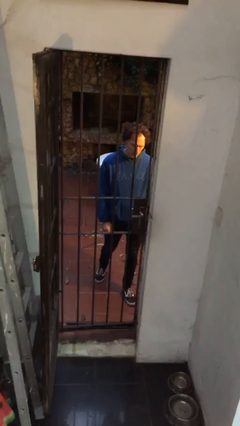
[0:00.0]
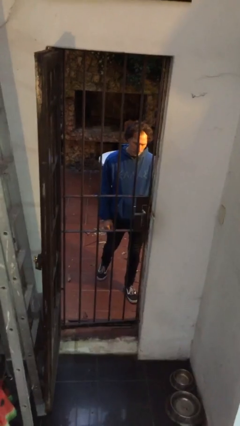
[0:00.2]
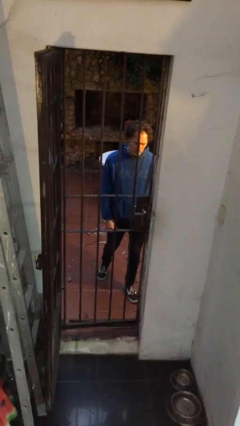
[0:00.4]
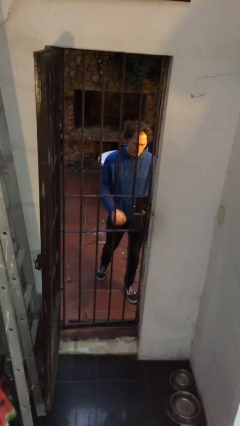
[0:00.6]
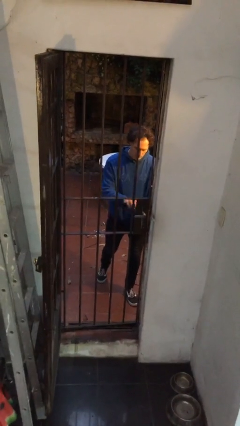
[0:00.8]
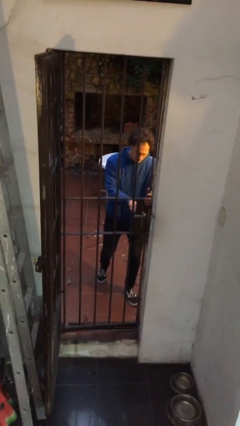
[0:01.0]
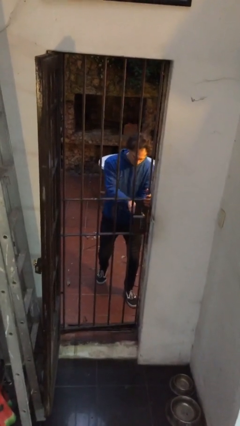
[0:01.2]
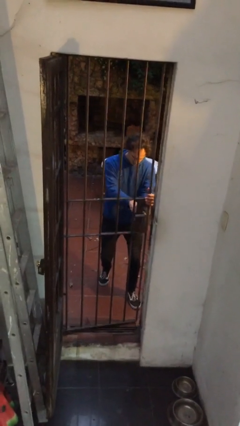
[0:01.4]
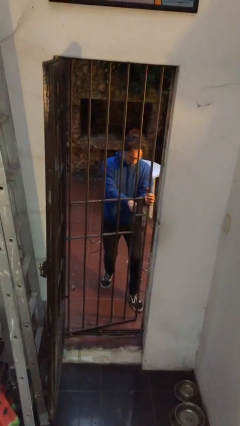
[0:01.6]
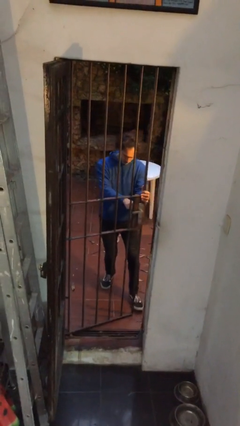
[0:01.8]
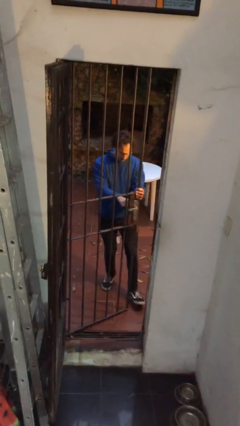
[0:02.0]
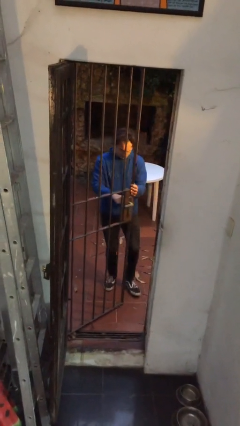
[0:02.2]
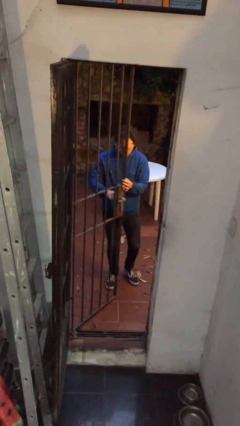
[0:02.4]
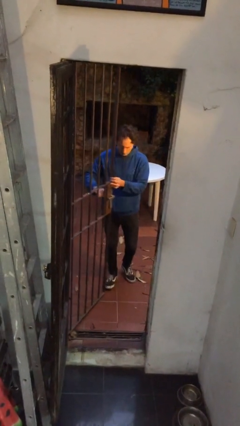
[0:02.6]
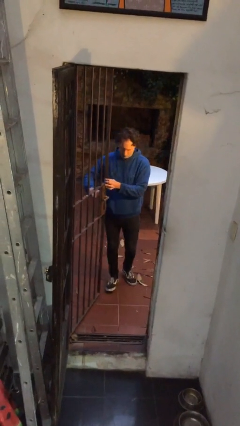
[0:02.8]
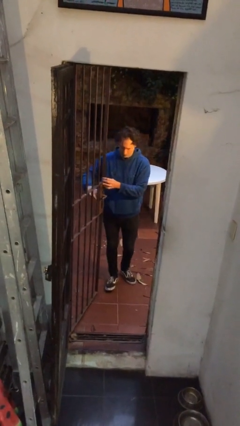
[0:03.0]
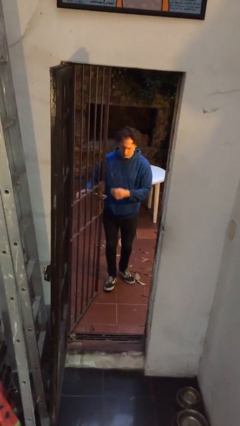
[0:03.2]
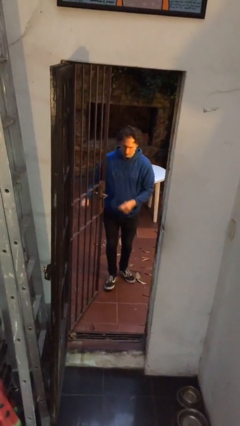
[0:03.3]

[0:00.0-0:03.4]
person opens gate

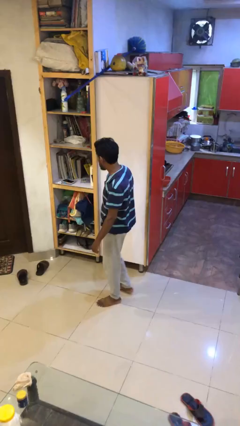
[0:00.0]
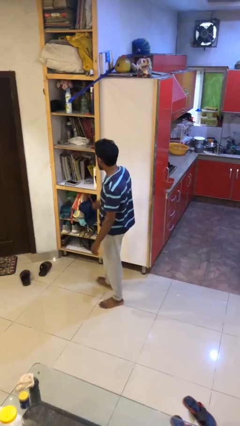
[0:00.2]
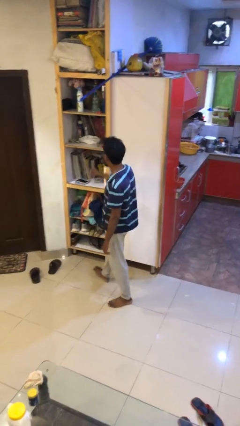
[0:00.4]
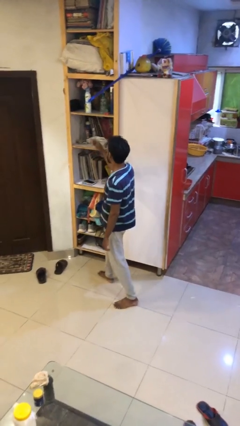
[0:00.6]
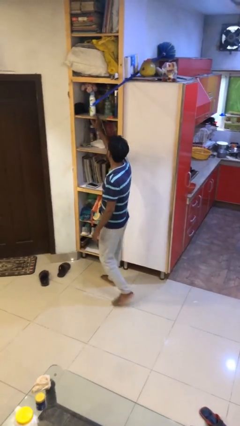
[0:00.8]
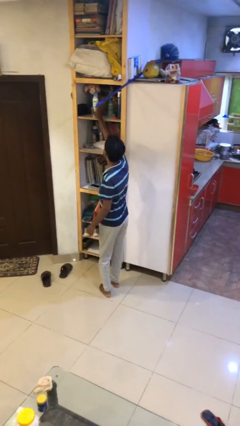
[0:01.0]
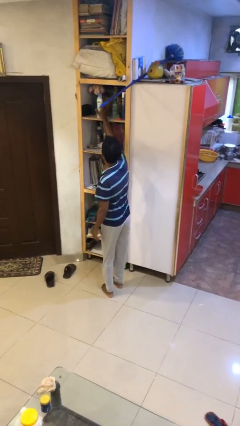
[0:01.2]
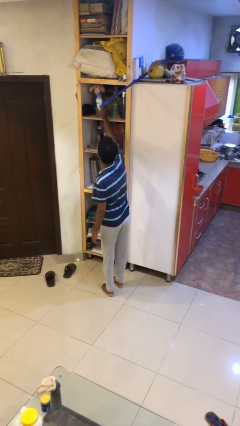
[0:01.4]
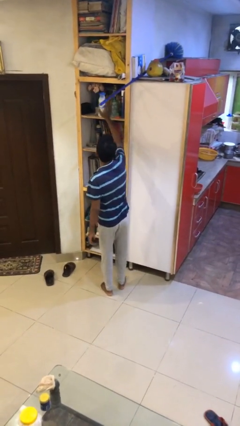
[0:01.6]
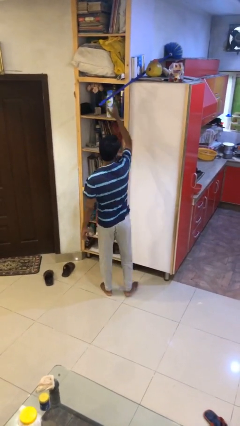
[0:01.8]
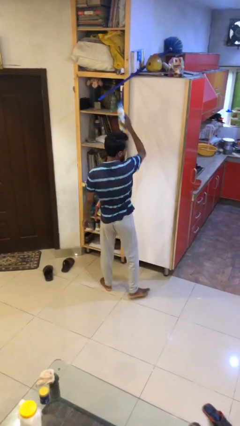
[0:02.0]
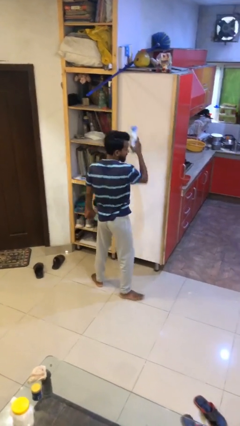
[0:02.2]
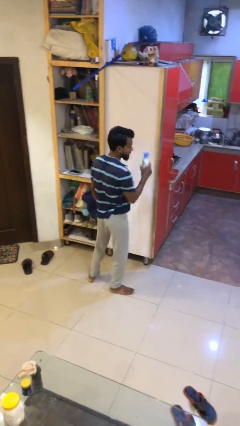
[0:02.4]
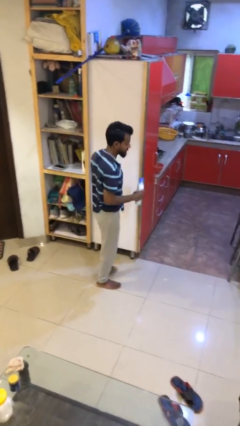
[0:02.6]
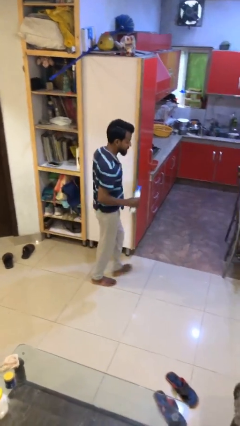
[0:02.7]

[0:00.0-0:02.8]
person picks up object from shelf

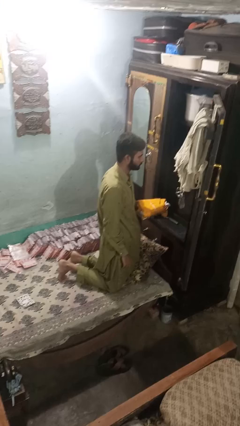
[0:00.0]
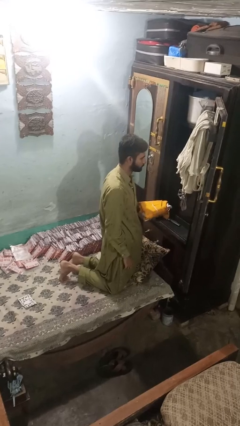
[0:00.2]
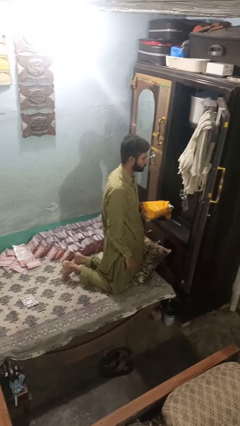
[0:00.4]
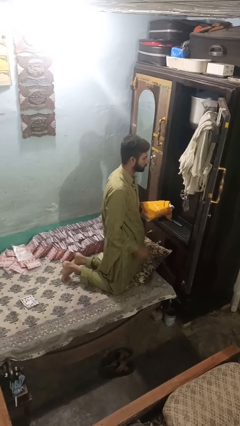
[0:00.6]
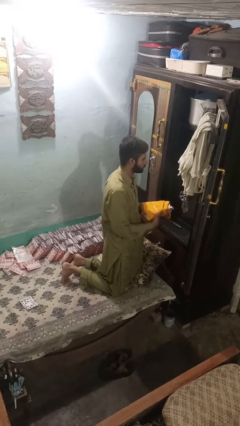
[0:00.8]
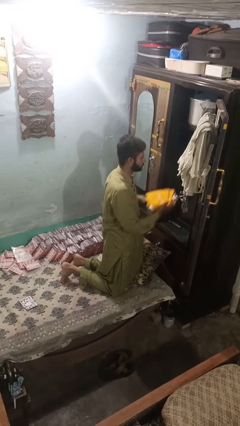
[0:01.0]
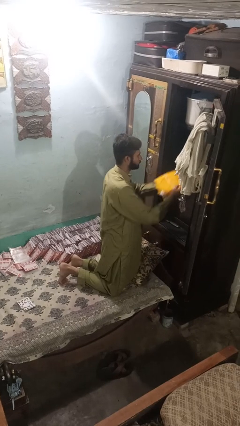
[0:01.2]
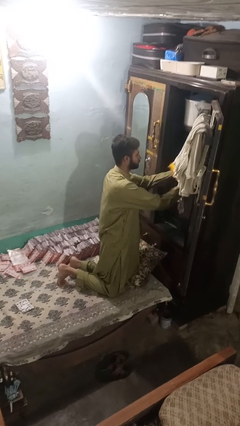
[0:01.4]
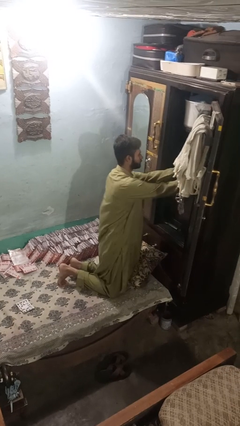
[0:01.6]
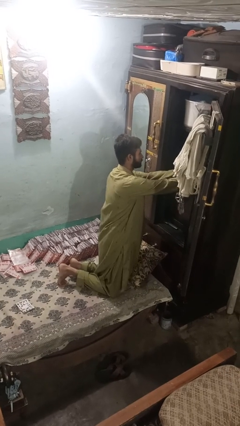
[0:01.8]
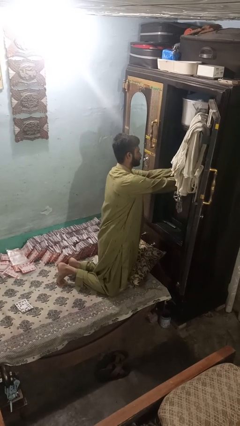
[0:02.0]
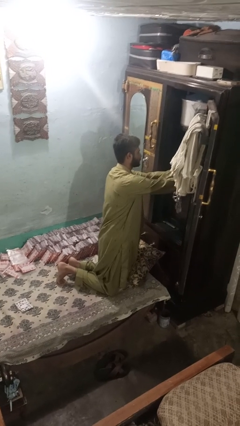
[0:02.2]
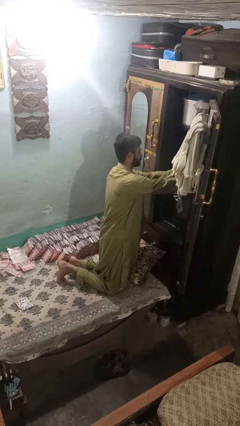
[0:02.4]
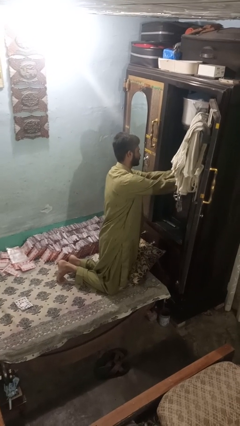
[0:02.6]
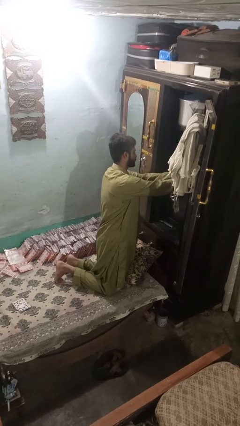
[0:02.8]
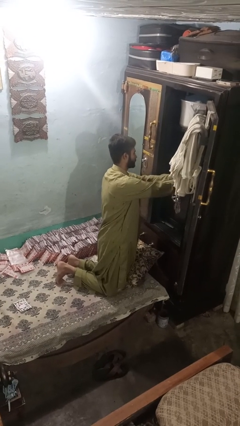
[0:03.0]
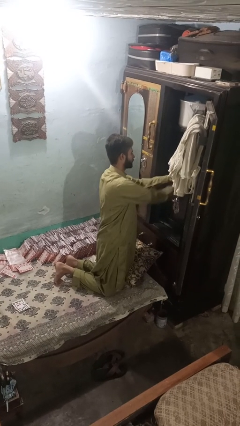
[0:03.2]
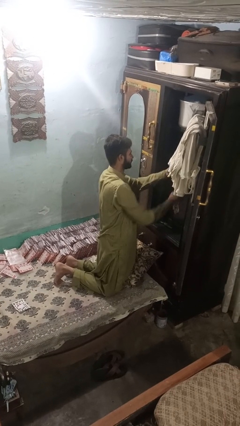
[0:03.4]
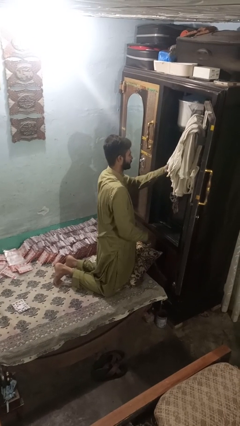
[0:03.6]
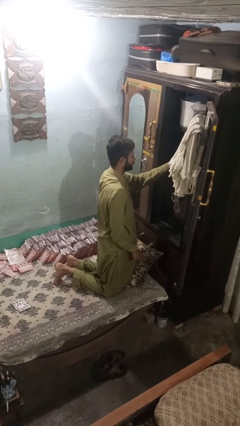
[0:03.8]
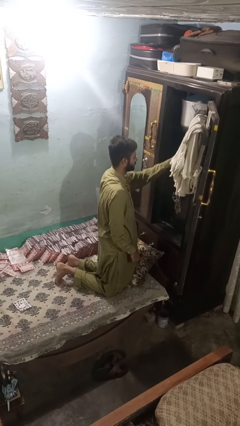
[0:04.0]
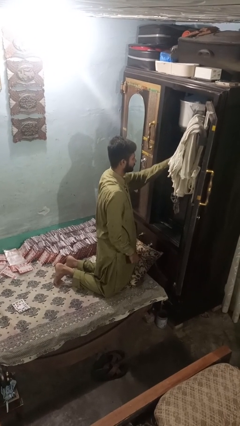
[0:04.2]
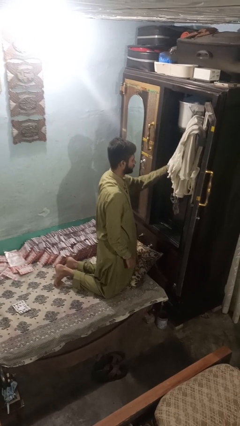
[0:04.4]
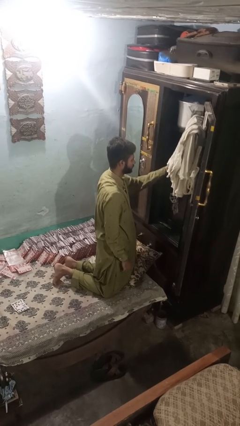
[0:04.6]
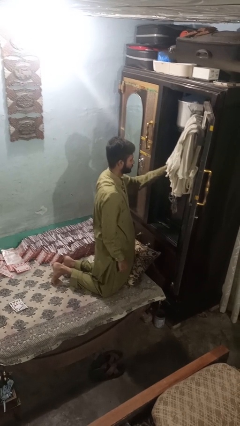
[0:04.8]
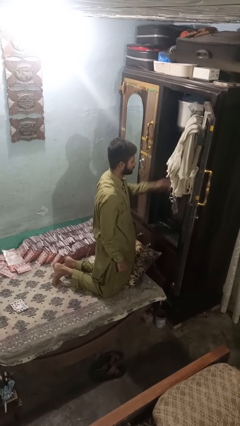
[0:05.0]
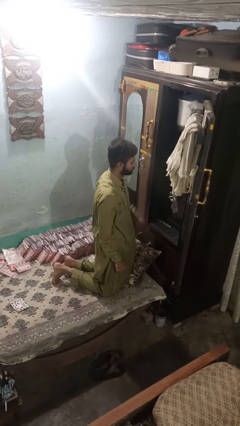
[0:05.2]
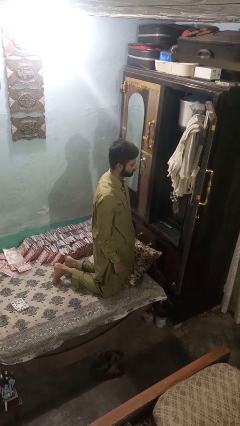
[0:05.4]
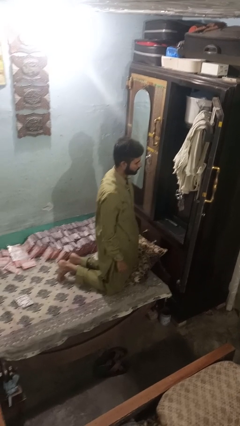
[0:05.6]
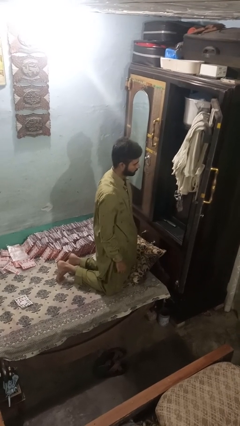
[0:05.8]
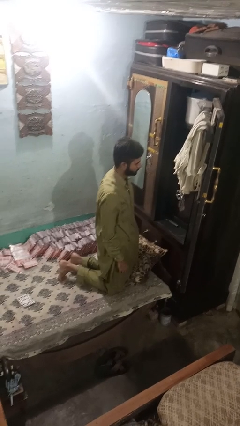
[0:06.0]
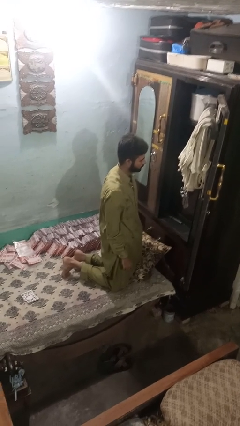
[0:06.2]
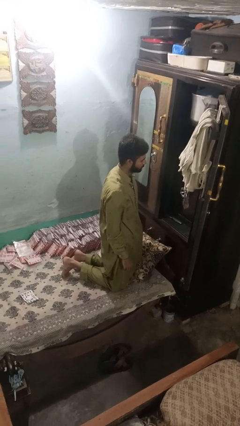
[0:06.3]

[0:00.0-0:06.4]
person puts clothes into dresser

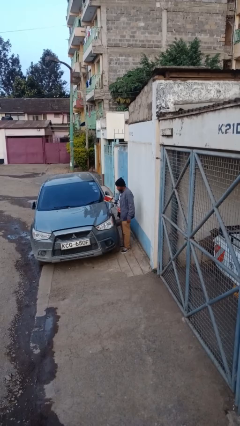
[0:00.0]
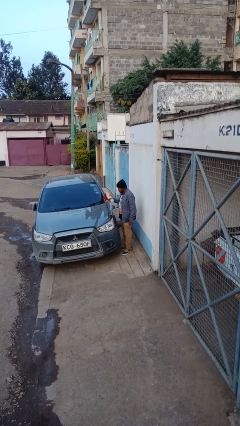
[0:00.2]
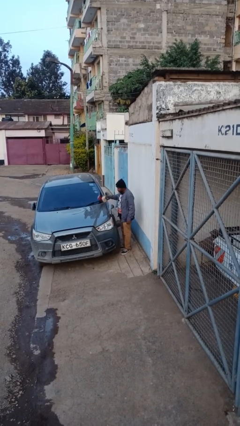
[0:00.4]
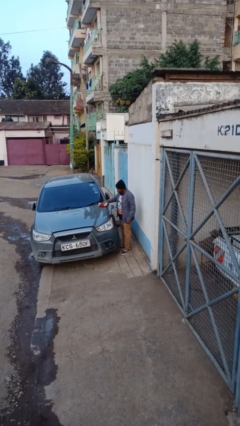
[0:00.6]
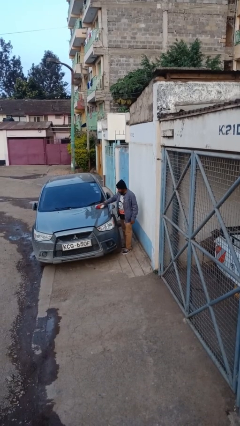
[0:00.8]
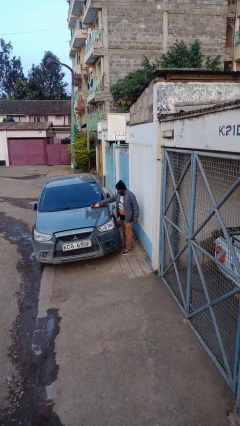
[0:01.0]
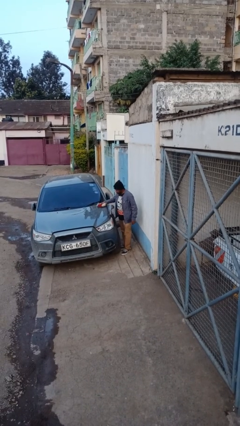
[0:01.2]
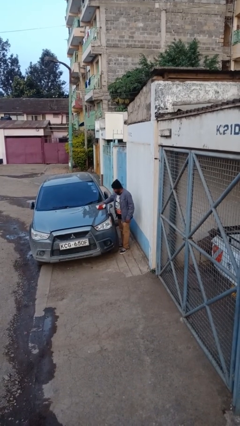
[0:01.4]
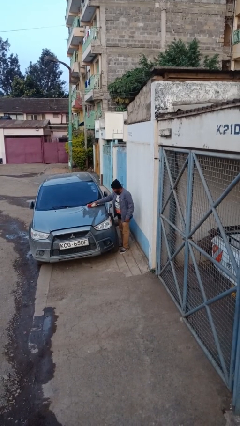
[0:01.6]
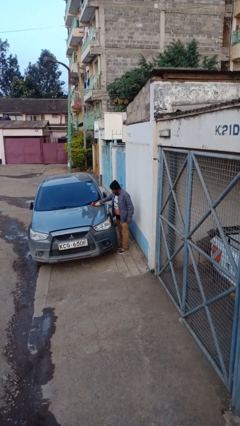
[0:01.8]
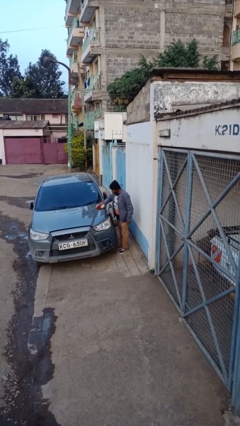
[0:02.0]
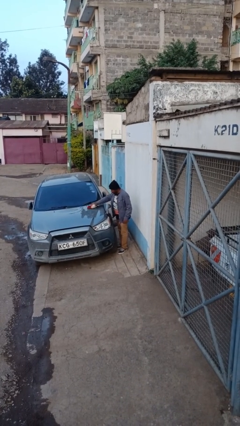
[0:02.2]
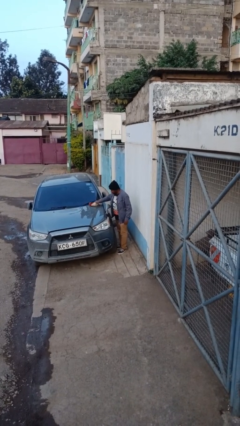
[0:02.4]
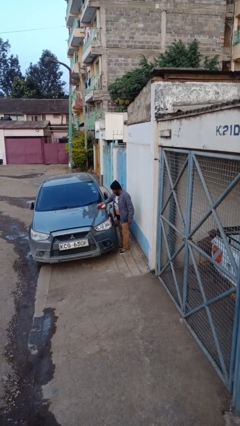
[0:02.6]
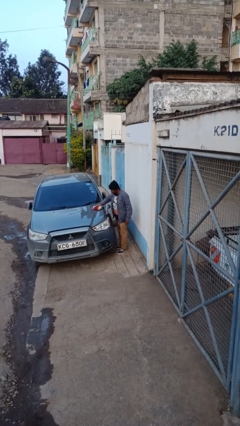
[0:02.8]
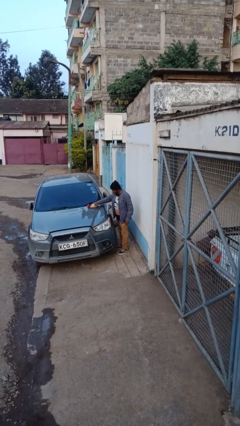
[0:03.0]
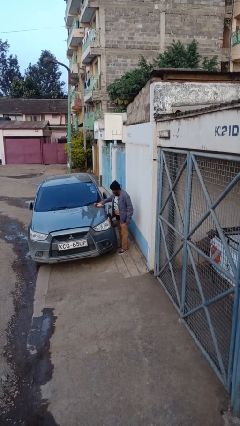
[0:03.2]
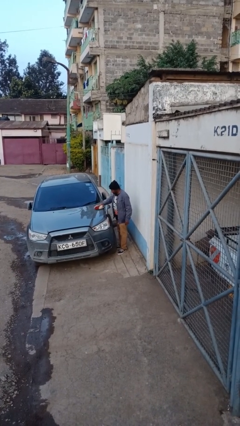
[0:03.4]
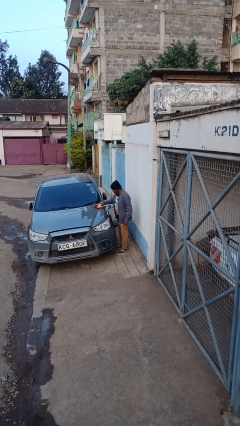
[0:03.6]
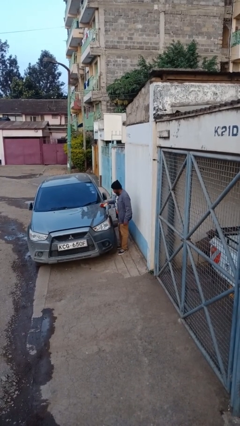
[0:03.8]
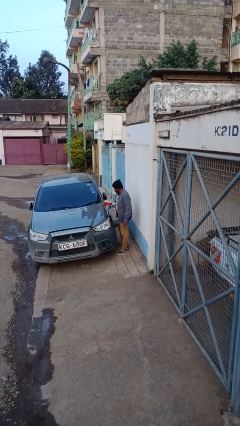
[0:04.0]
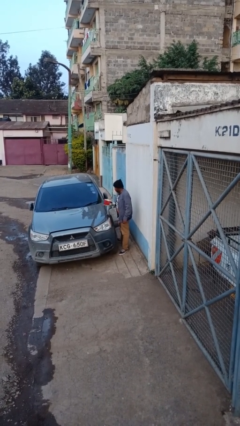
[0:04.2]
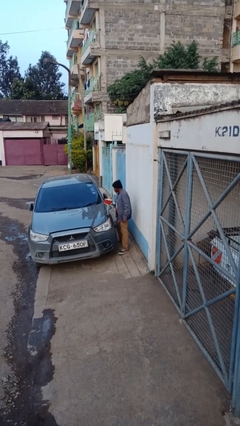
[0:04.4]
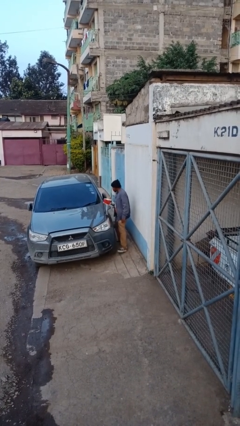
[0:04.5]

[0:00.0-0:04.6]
person polishes car with rag

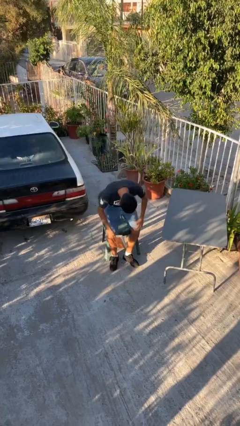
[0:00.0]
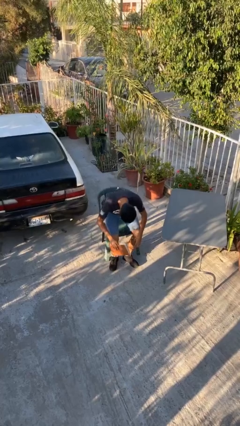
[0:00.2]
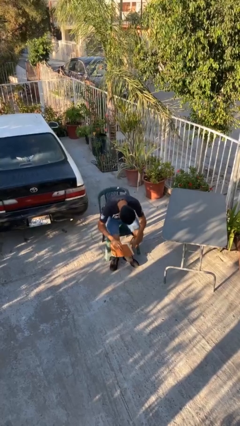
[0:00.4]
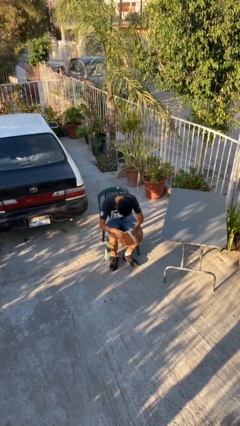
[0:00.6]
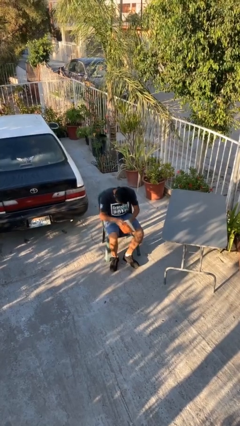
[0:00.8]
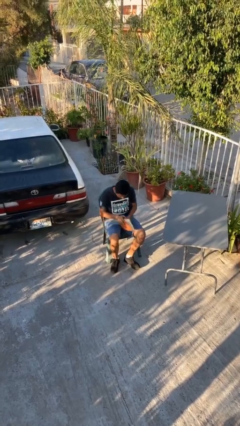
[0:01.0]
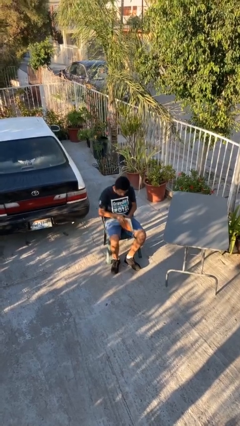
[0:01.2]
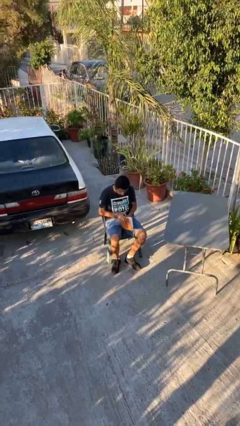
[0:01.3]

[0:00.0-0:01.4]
person sits down
